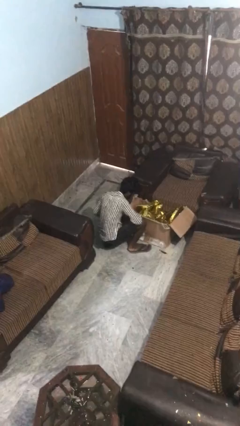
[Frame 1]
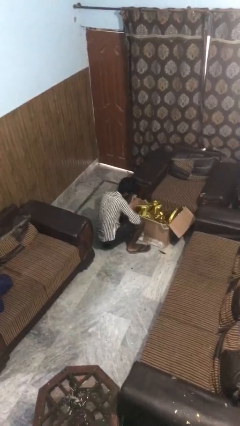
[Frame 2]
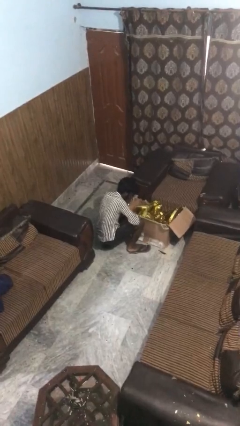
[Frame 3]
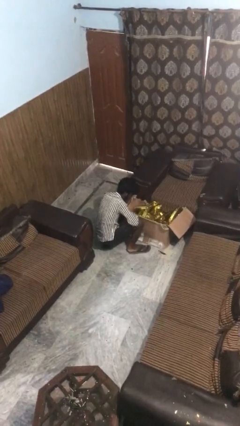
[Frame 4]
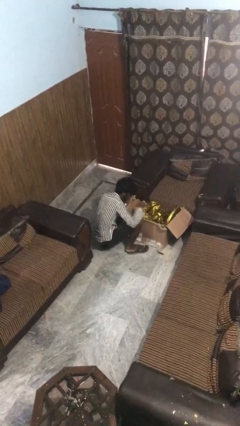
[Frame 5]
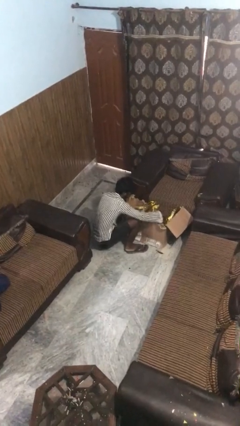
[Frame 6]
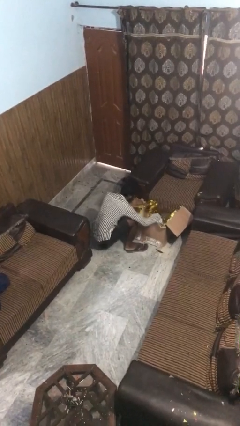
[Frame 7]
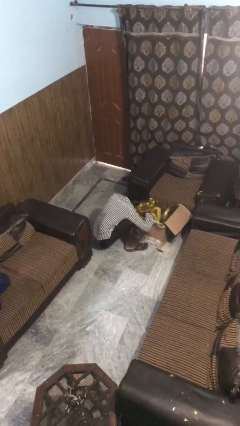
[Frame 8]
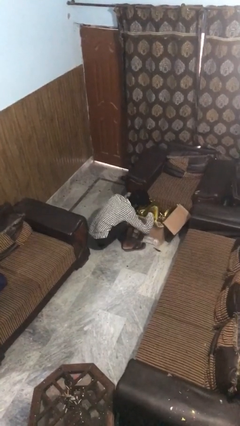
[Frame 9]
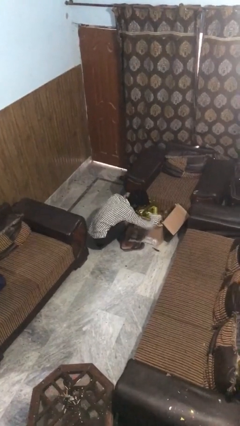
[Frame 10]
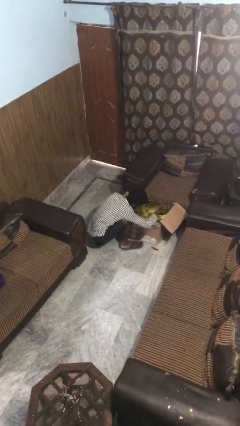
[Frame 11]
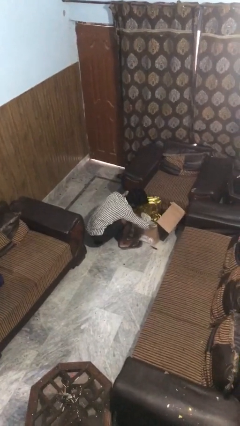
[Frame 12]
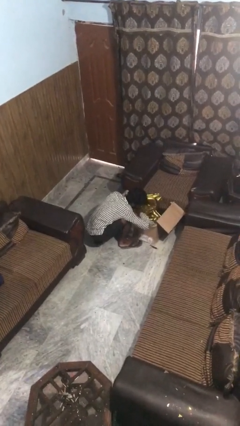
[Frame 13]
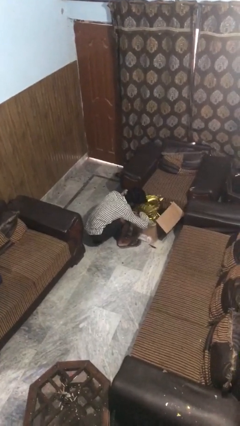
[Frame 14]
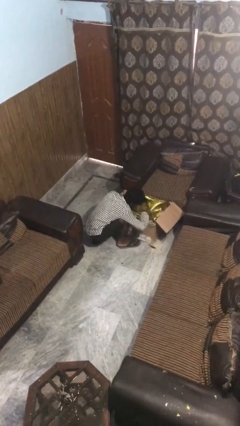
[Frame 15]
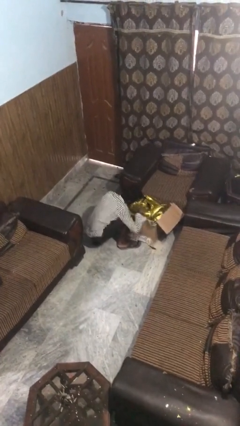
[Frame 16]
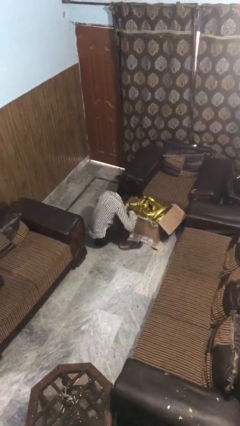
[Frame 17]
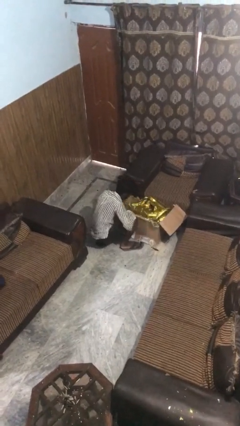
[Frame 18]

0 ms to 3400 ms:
person searches in box

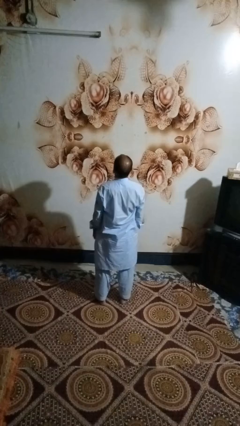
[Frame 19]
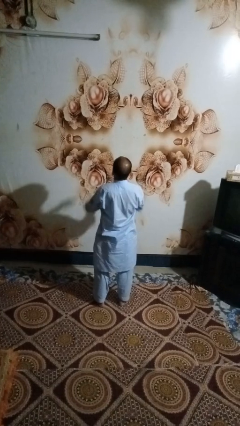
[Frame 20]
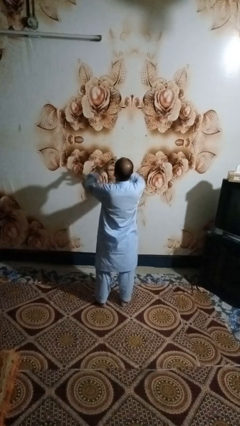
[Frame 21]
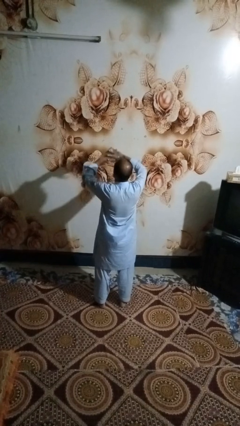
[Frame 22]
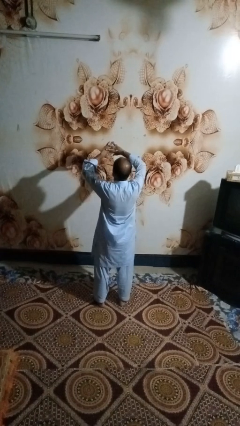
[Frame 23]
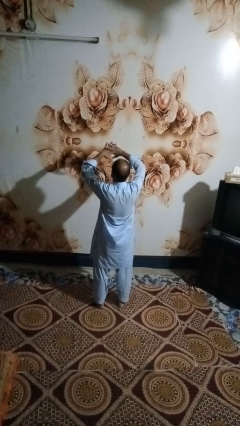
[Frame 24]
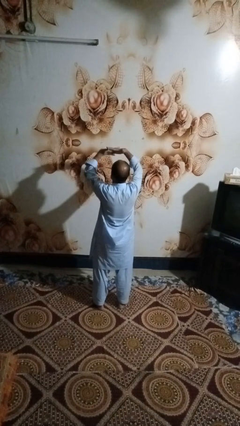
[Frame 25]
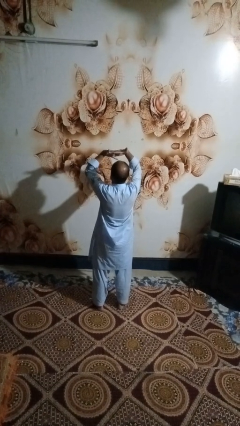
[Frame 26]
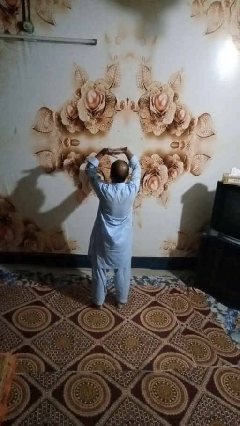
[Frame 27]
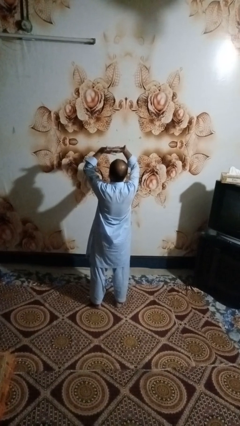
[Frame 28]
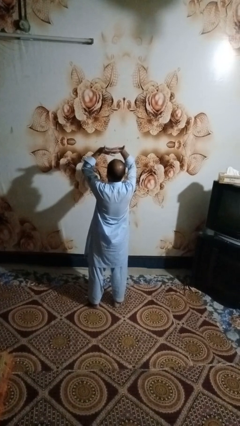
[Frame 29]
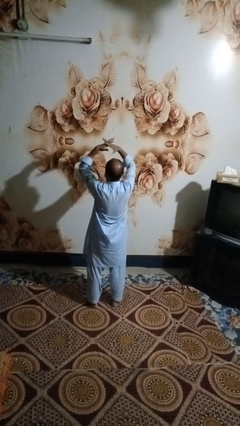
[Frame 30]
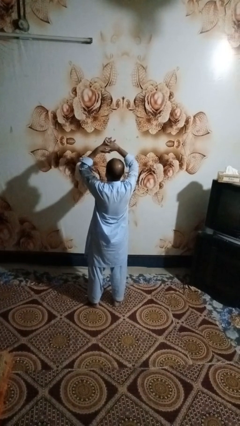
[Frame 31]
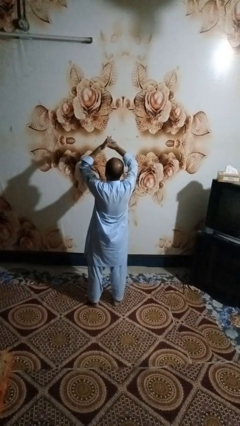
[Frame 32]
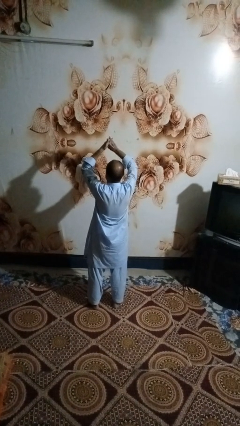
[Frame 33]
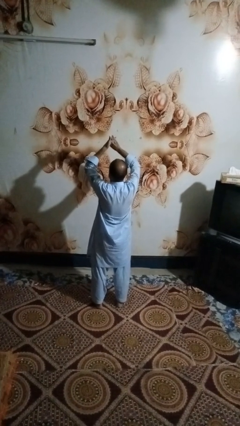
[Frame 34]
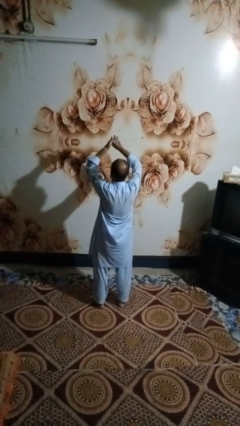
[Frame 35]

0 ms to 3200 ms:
person cracks knuckles

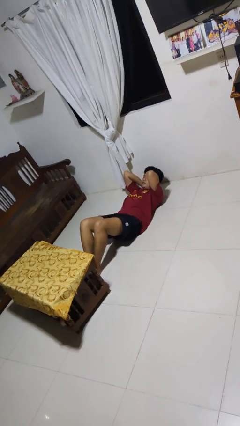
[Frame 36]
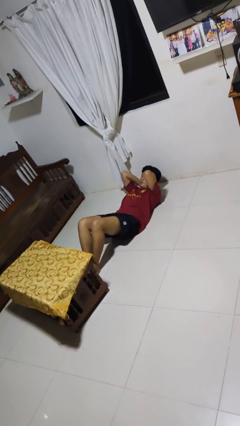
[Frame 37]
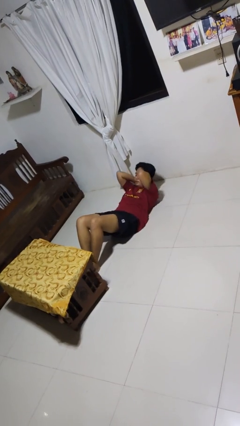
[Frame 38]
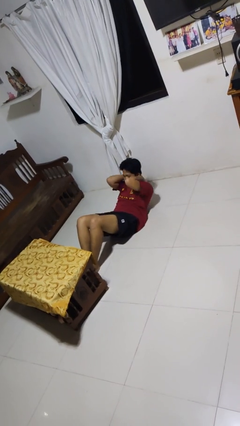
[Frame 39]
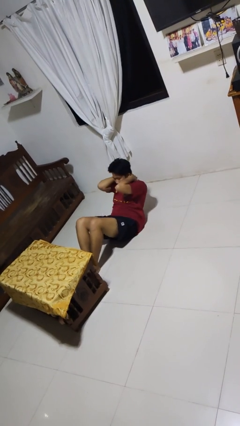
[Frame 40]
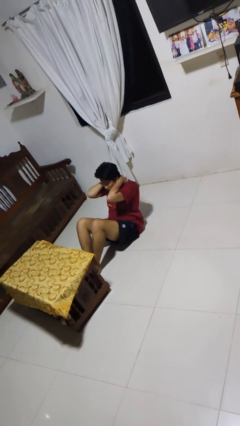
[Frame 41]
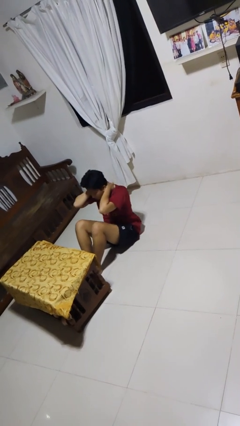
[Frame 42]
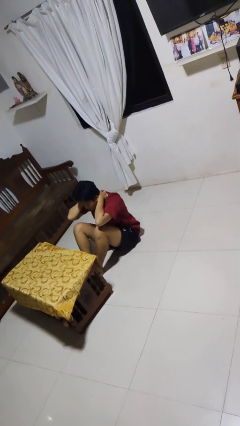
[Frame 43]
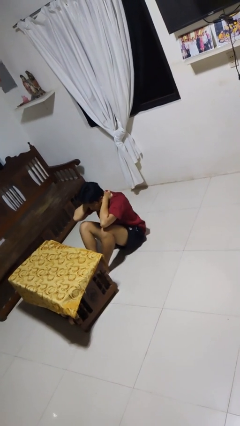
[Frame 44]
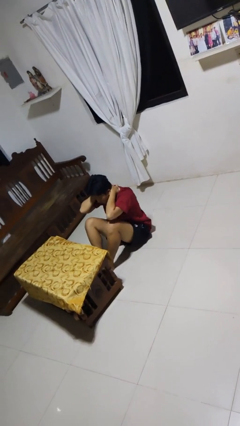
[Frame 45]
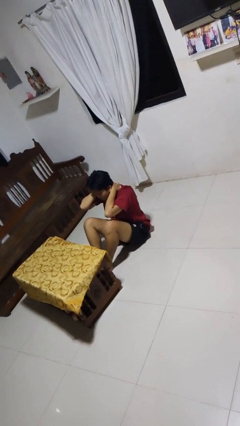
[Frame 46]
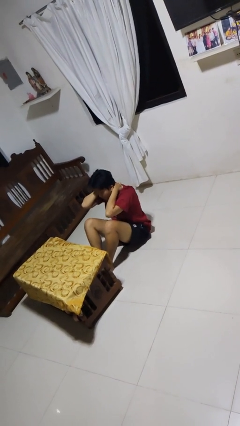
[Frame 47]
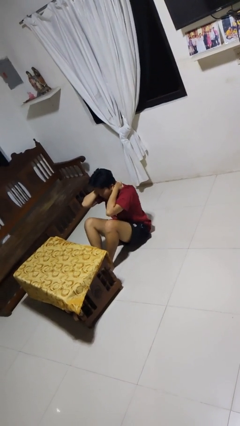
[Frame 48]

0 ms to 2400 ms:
person exercises with situp

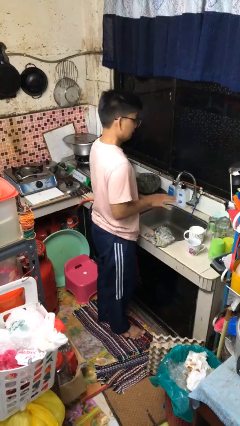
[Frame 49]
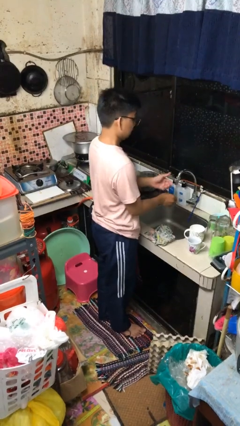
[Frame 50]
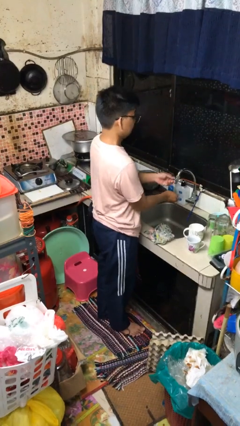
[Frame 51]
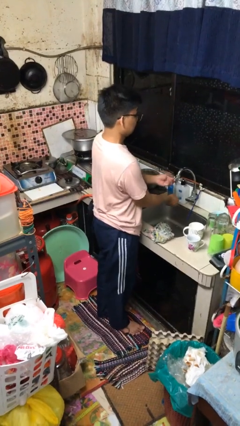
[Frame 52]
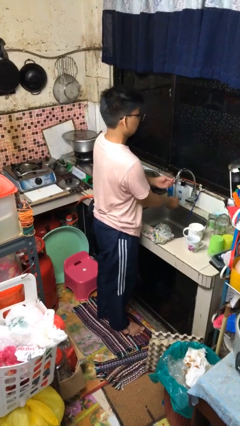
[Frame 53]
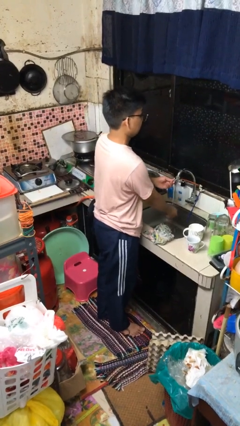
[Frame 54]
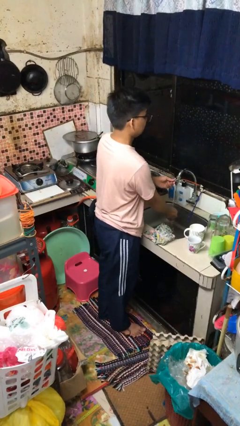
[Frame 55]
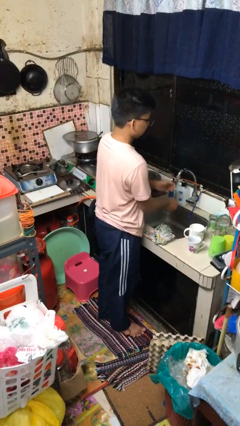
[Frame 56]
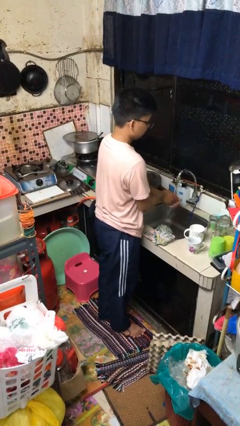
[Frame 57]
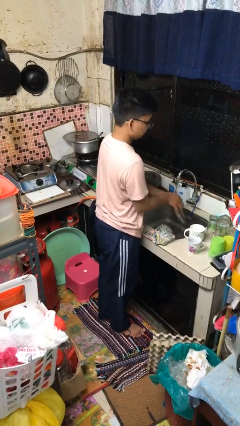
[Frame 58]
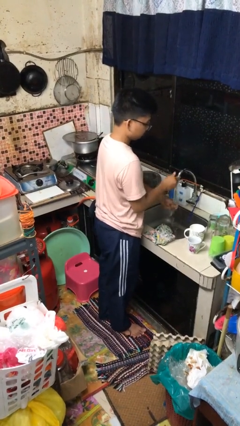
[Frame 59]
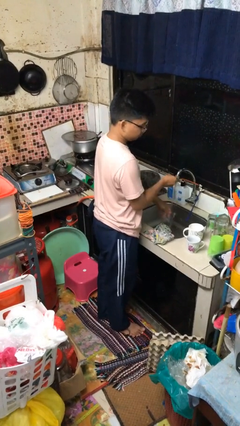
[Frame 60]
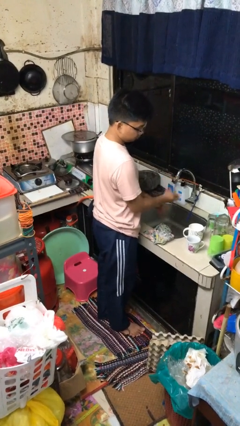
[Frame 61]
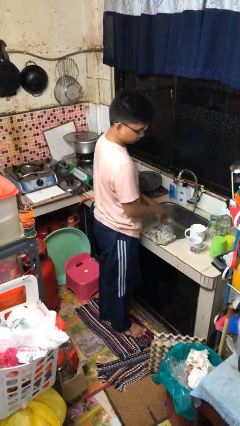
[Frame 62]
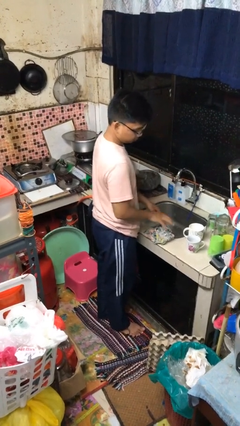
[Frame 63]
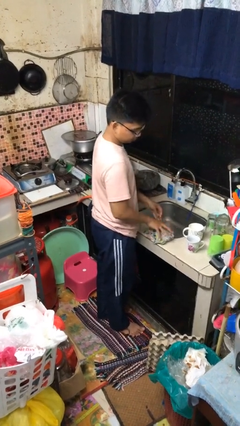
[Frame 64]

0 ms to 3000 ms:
person washes hands

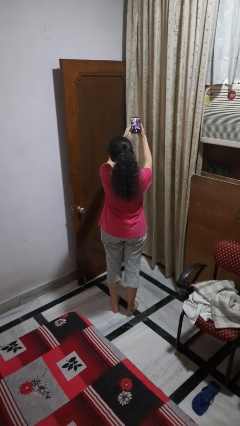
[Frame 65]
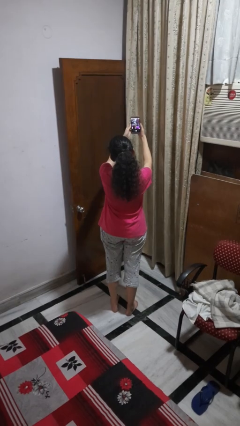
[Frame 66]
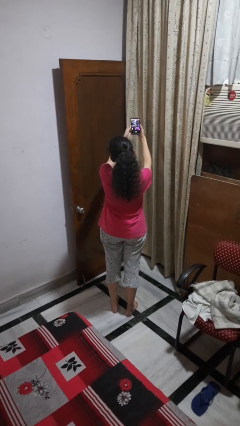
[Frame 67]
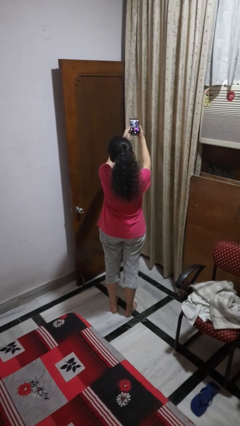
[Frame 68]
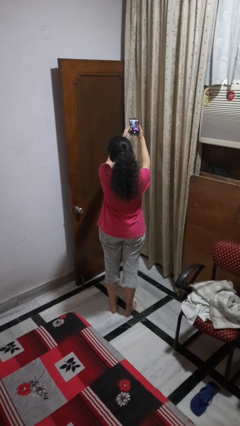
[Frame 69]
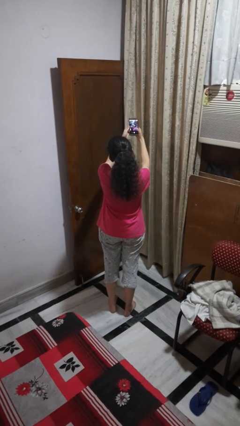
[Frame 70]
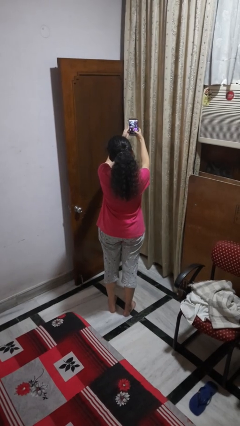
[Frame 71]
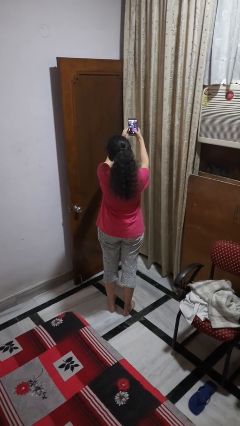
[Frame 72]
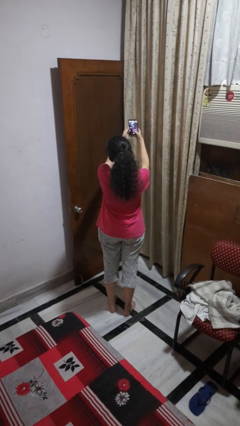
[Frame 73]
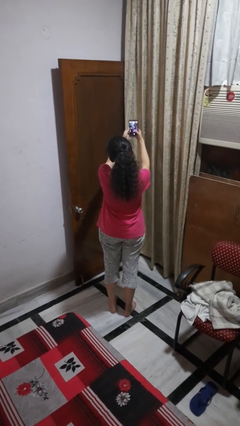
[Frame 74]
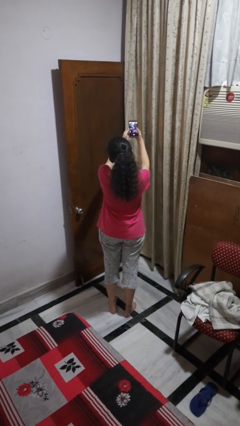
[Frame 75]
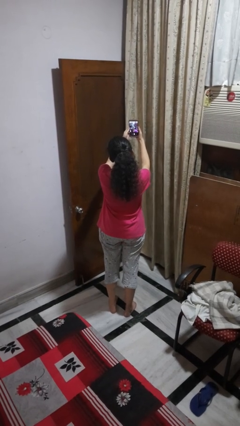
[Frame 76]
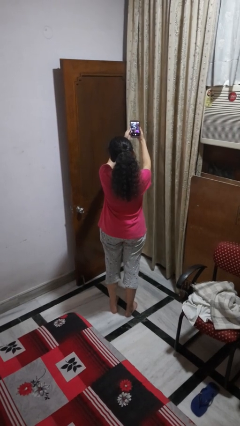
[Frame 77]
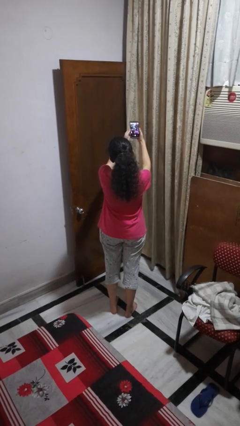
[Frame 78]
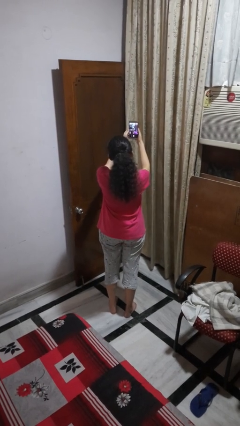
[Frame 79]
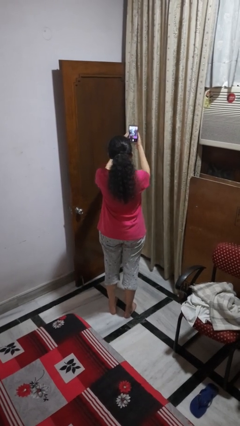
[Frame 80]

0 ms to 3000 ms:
person takes selfie

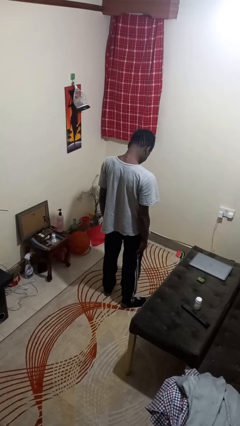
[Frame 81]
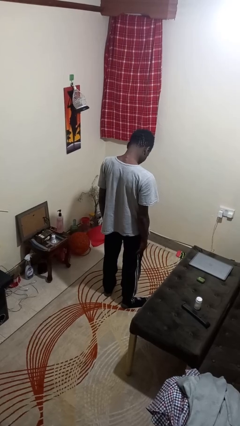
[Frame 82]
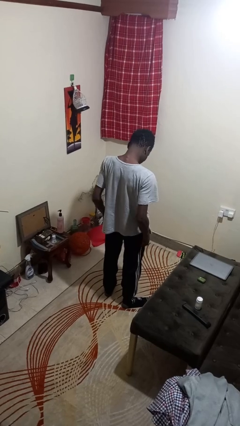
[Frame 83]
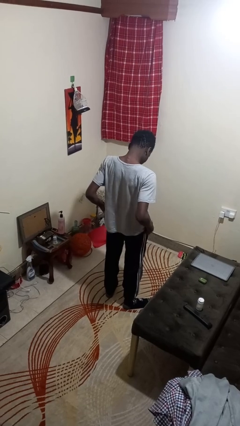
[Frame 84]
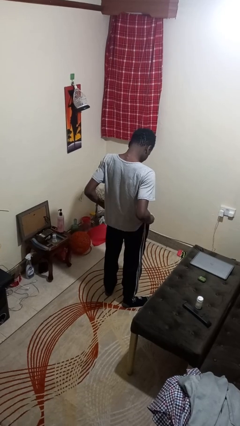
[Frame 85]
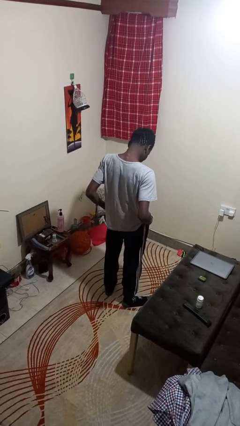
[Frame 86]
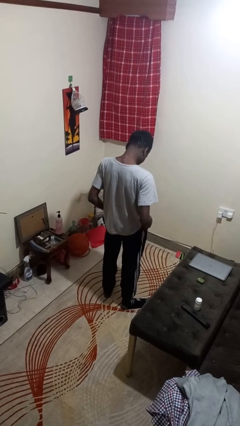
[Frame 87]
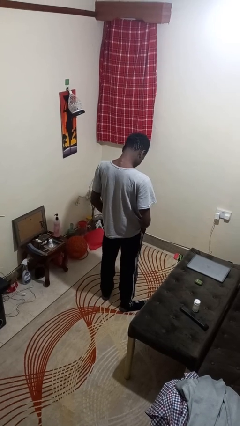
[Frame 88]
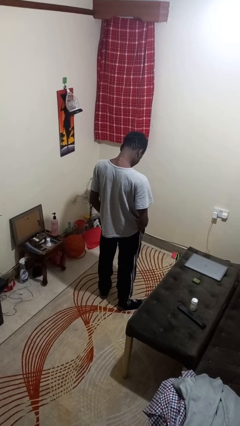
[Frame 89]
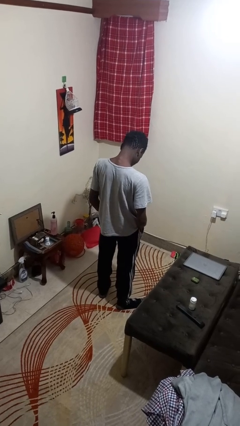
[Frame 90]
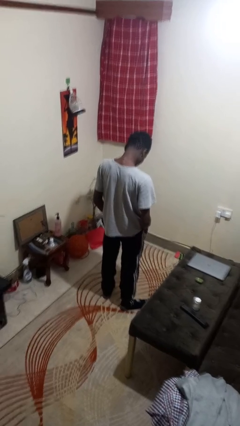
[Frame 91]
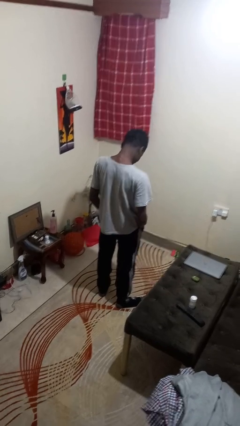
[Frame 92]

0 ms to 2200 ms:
person puts hands in back pockets
